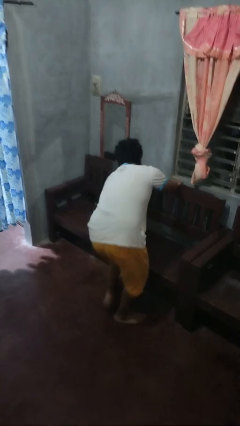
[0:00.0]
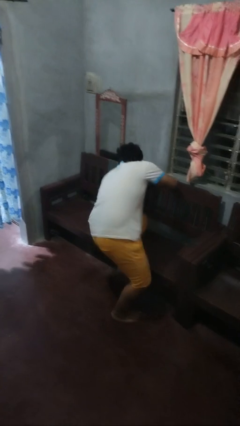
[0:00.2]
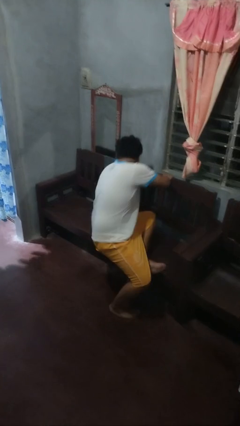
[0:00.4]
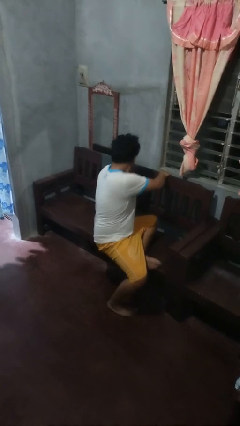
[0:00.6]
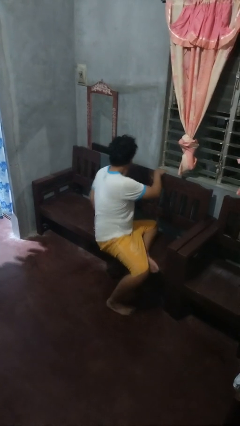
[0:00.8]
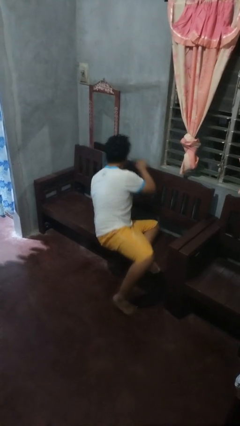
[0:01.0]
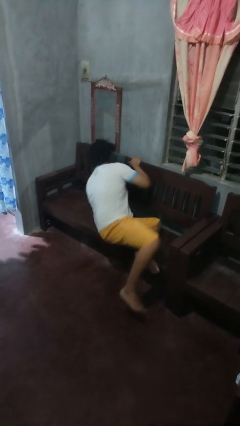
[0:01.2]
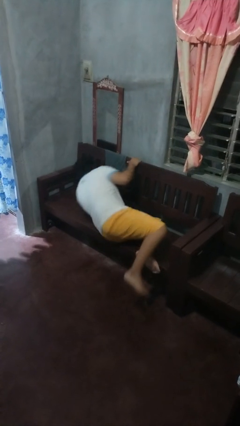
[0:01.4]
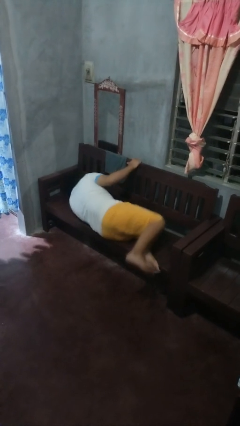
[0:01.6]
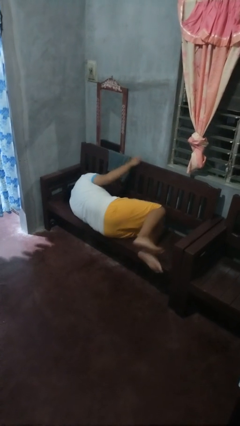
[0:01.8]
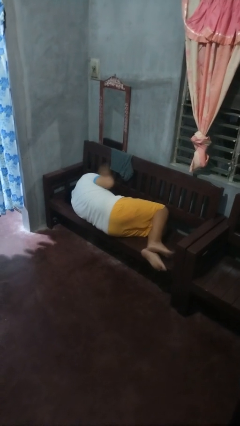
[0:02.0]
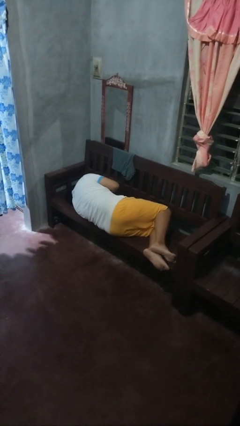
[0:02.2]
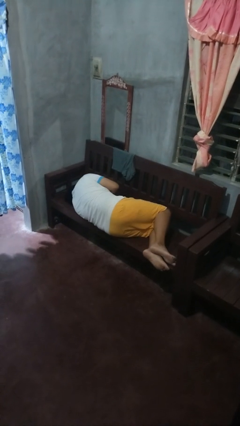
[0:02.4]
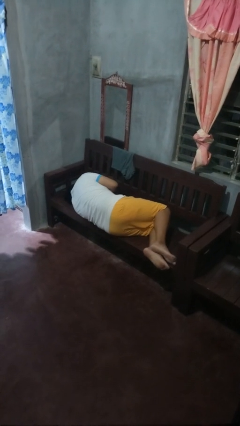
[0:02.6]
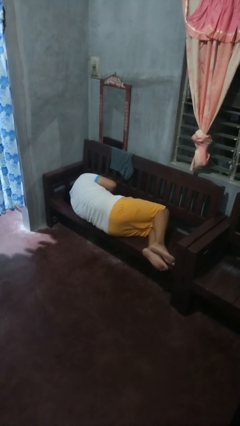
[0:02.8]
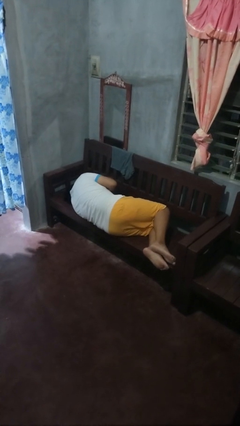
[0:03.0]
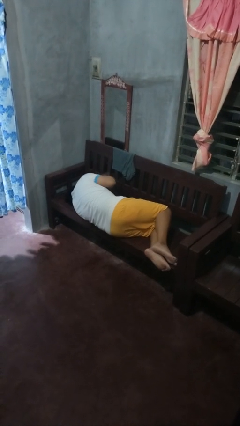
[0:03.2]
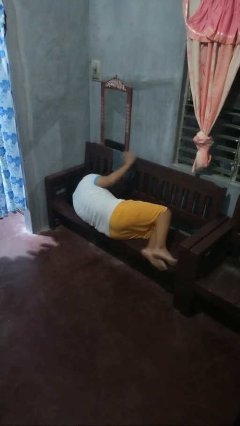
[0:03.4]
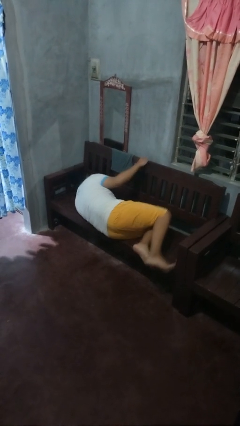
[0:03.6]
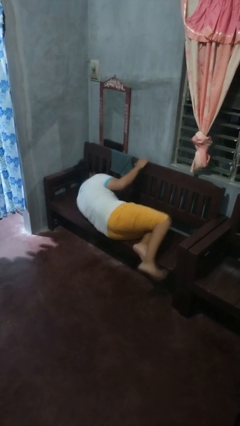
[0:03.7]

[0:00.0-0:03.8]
person lies down on couch

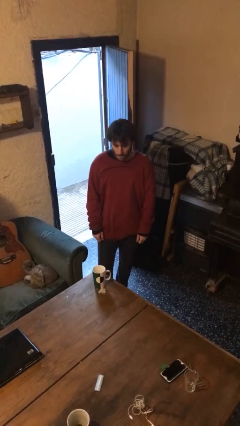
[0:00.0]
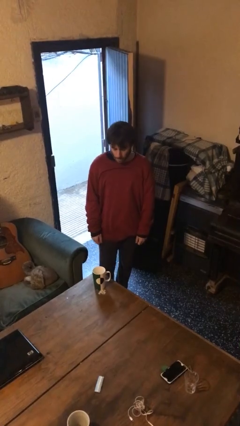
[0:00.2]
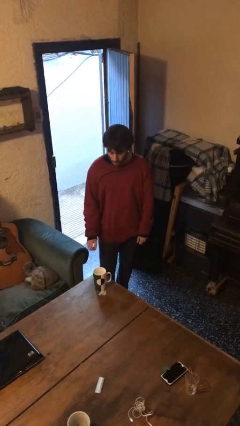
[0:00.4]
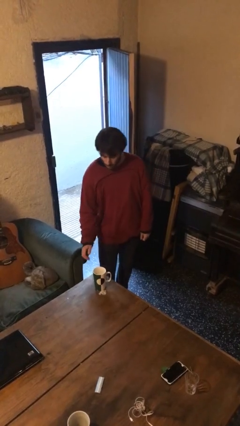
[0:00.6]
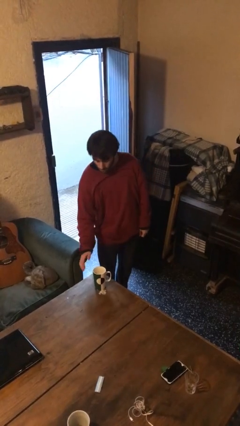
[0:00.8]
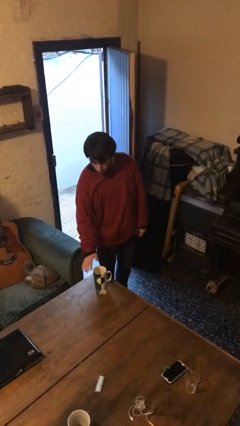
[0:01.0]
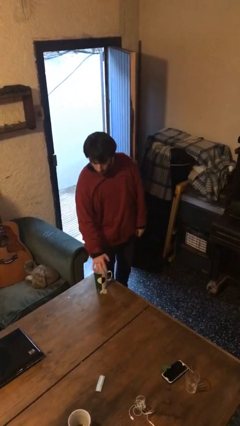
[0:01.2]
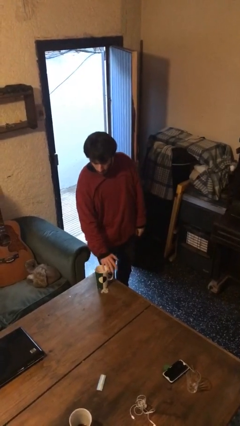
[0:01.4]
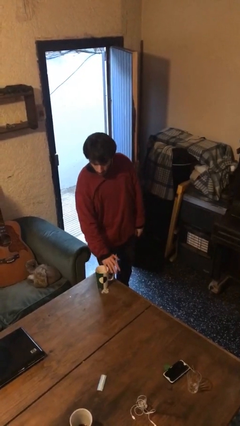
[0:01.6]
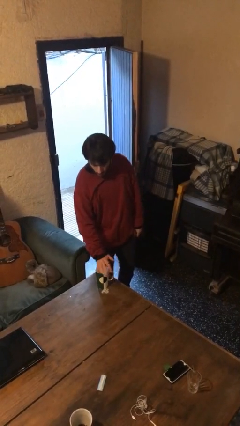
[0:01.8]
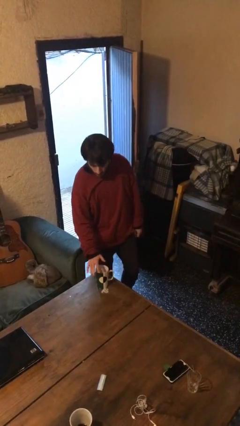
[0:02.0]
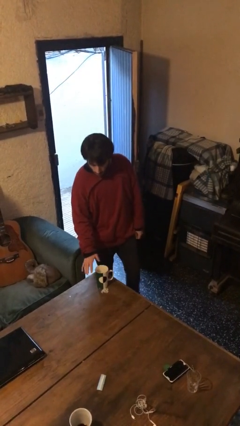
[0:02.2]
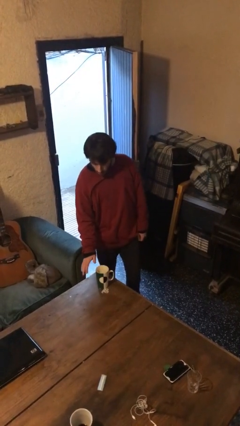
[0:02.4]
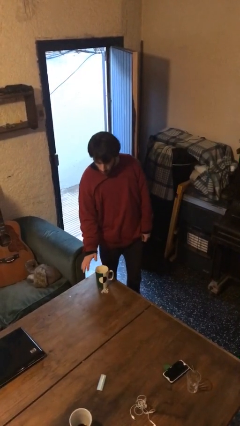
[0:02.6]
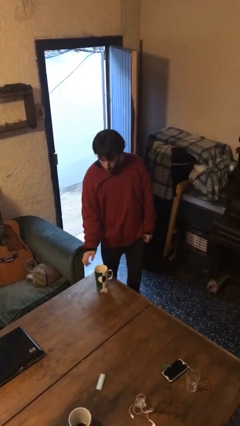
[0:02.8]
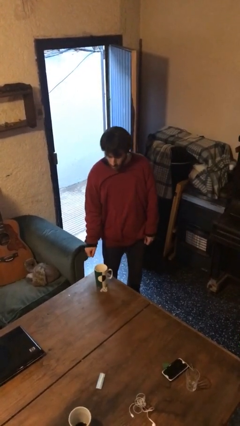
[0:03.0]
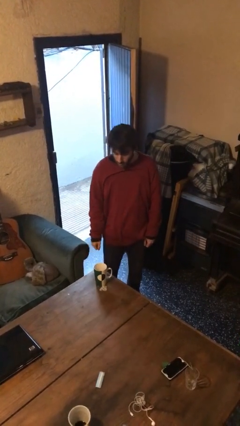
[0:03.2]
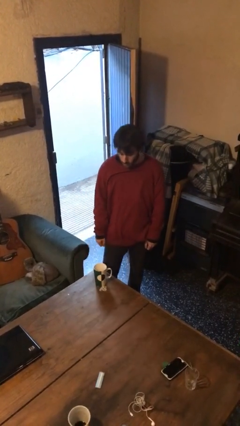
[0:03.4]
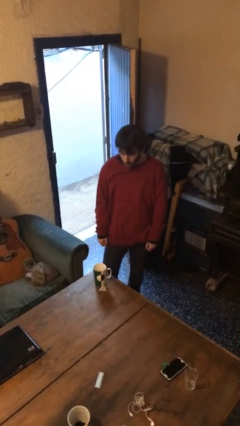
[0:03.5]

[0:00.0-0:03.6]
person waves hand over object

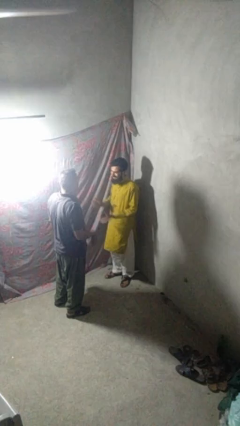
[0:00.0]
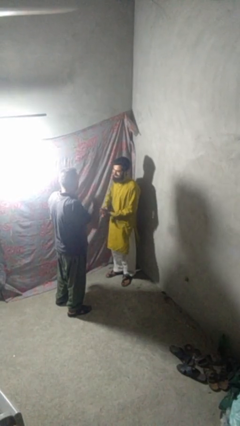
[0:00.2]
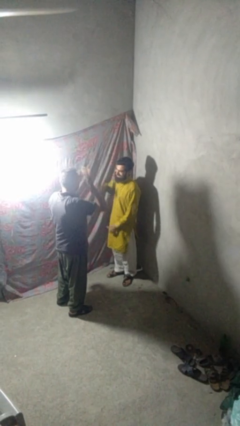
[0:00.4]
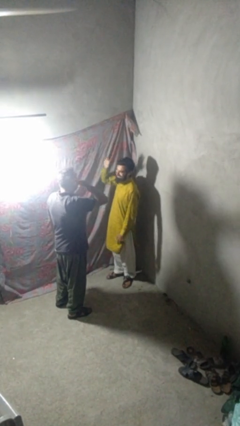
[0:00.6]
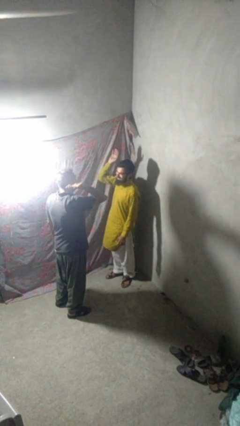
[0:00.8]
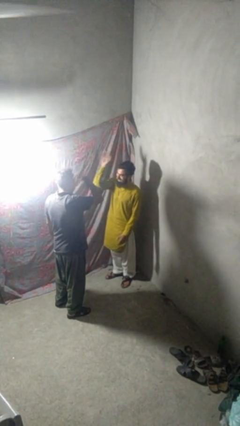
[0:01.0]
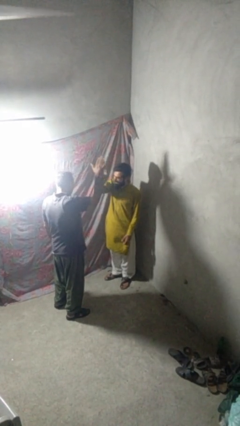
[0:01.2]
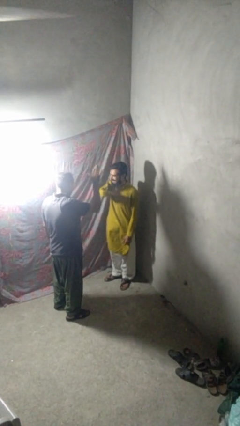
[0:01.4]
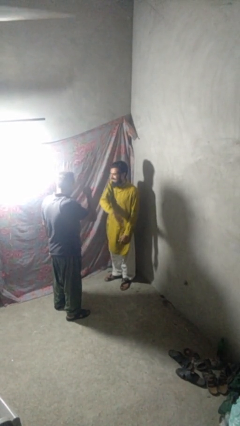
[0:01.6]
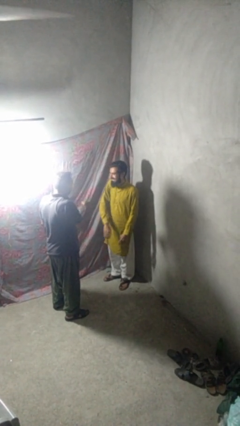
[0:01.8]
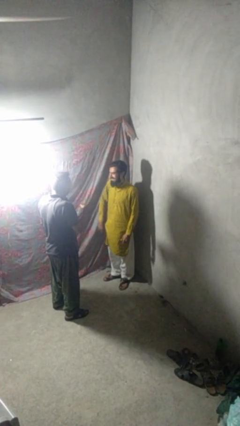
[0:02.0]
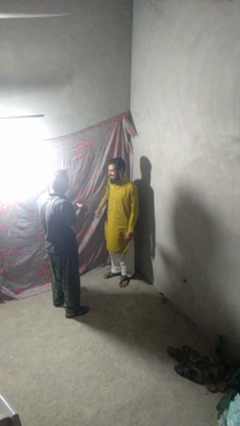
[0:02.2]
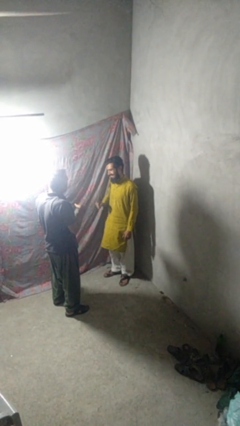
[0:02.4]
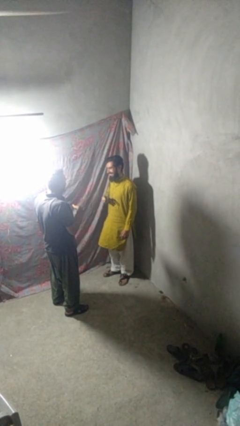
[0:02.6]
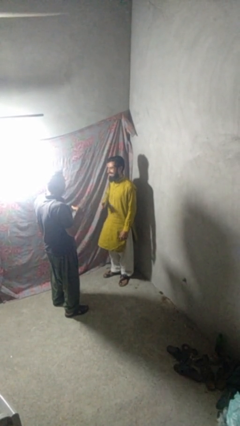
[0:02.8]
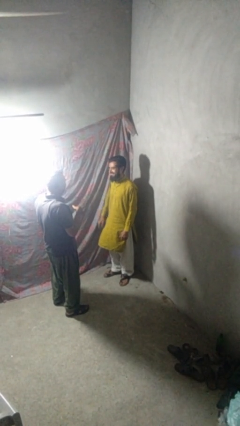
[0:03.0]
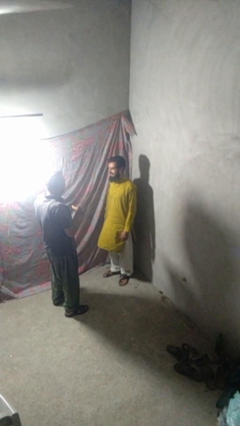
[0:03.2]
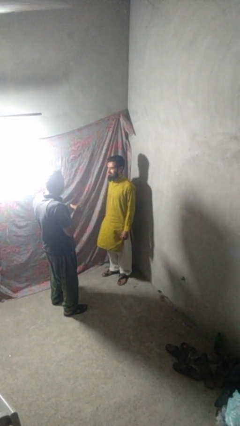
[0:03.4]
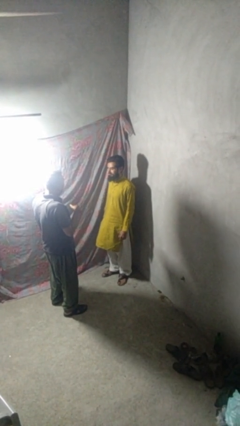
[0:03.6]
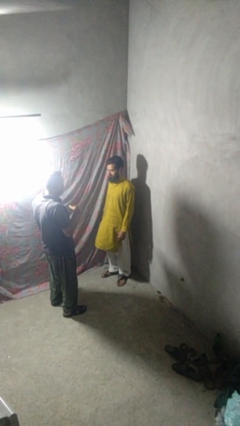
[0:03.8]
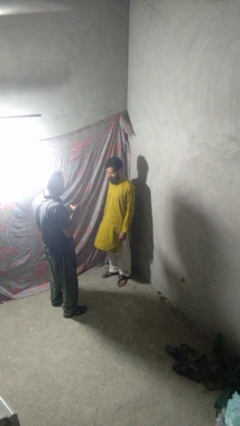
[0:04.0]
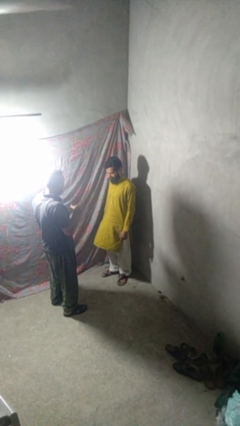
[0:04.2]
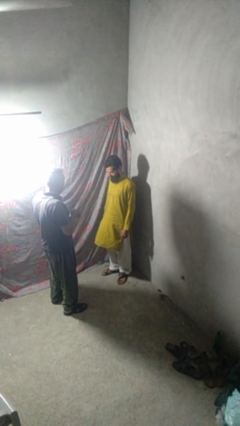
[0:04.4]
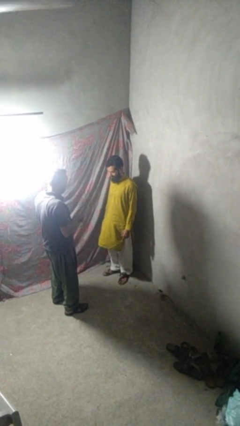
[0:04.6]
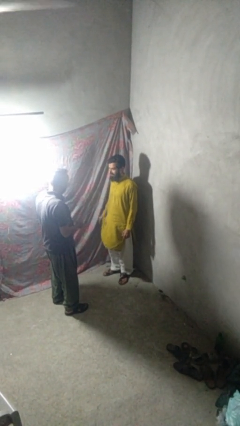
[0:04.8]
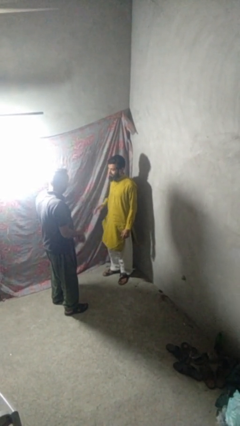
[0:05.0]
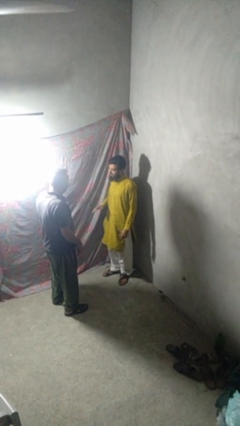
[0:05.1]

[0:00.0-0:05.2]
person highfives hand

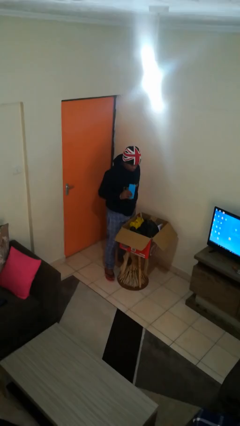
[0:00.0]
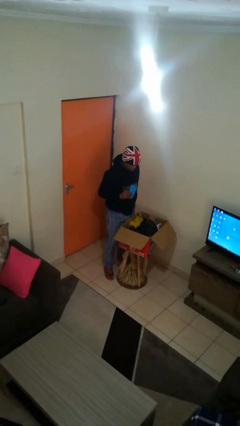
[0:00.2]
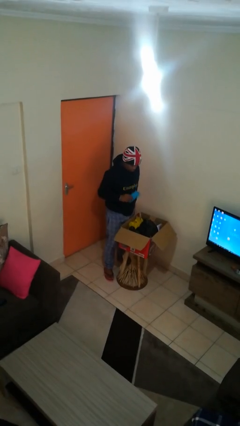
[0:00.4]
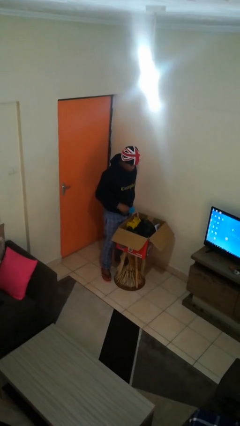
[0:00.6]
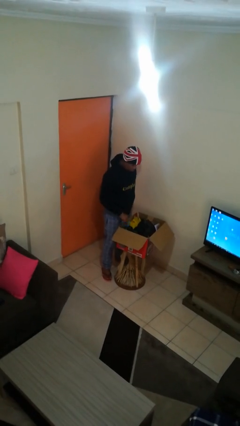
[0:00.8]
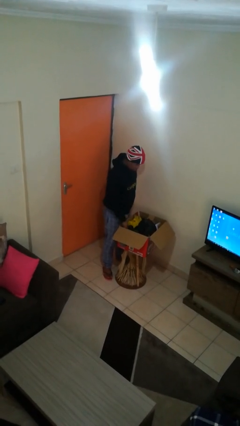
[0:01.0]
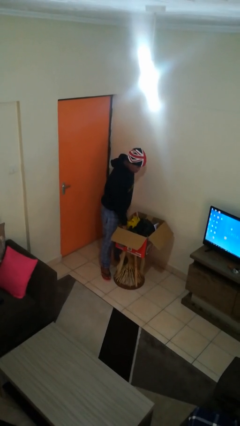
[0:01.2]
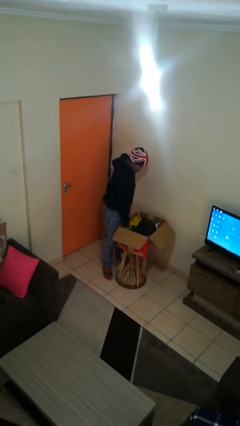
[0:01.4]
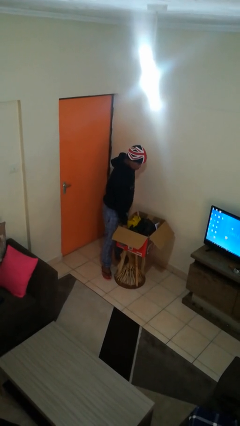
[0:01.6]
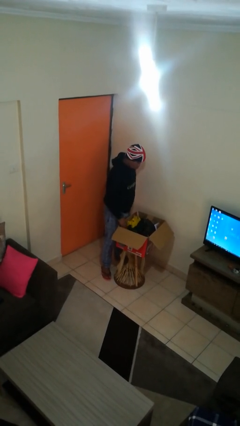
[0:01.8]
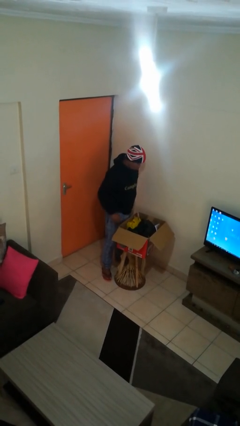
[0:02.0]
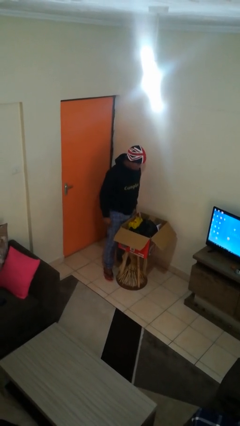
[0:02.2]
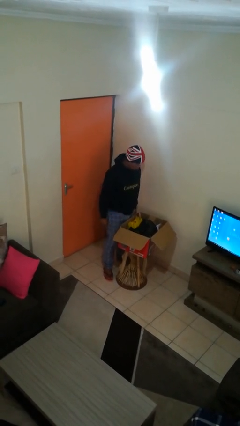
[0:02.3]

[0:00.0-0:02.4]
person puts object into box

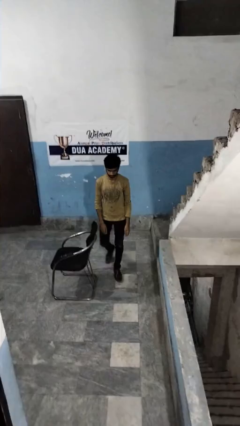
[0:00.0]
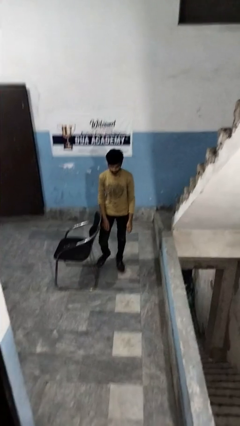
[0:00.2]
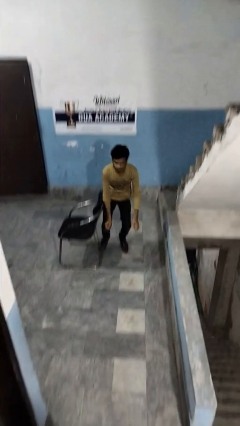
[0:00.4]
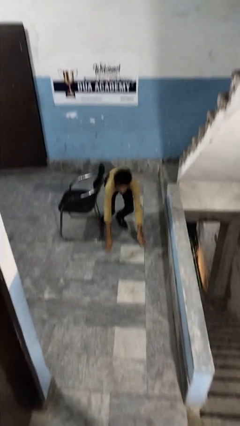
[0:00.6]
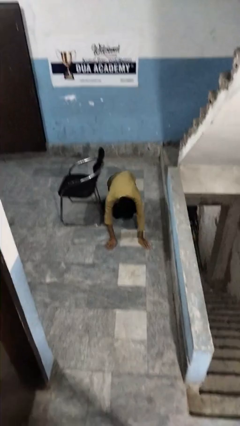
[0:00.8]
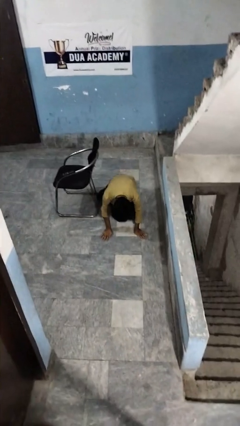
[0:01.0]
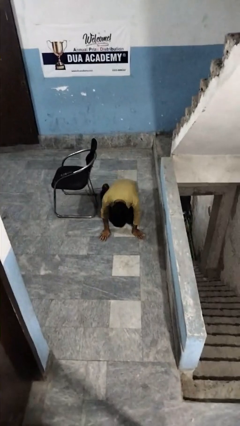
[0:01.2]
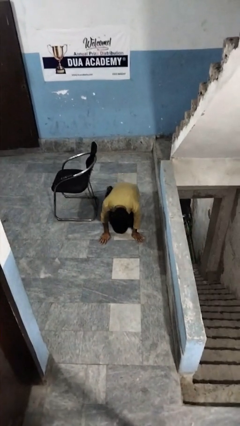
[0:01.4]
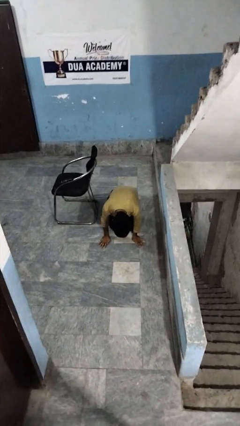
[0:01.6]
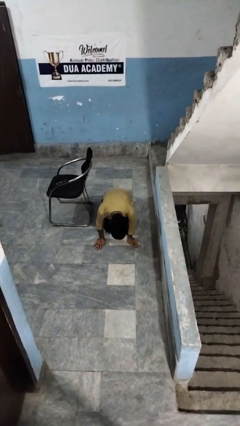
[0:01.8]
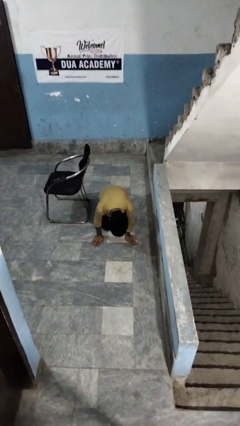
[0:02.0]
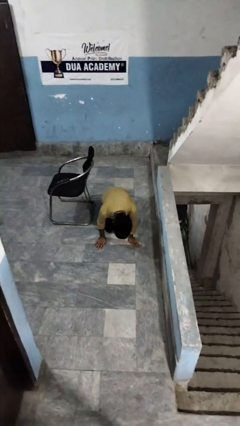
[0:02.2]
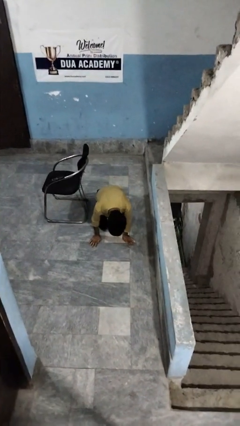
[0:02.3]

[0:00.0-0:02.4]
person trips on object on floor

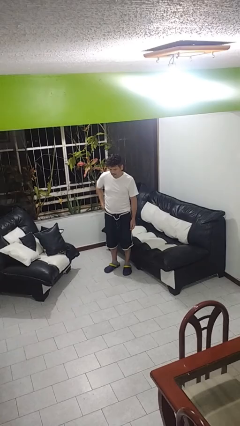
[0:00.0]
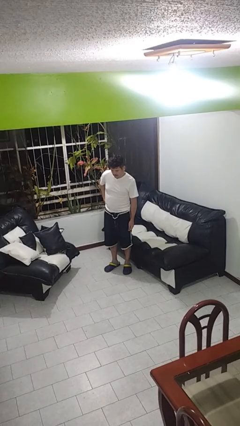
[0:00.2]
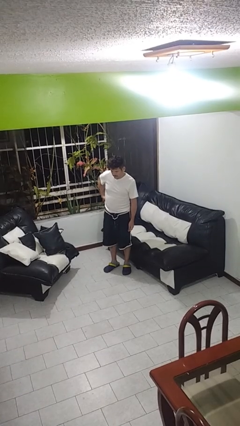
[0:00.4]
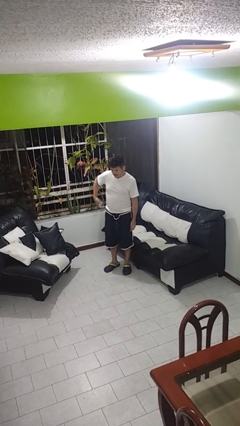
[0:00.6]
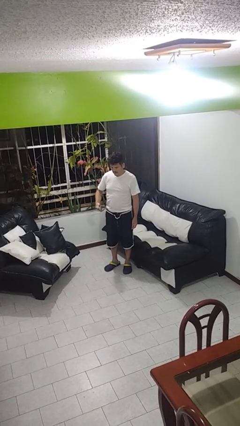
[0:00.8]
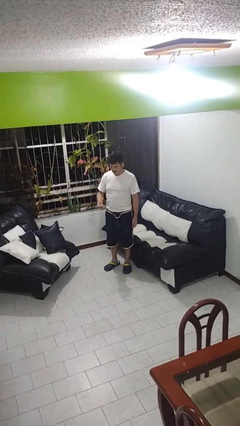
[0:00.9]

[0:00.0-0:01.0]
person takes phone from pocket
